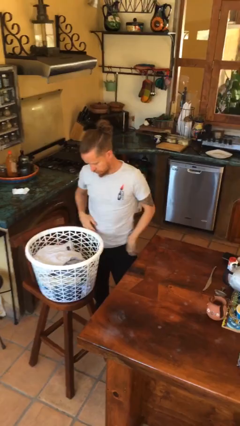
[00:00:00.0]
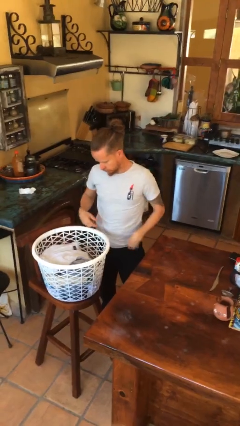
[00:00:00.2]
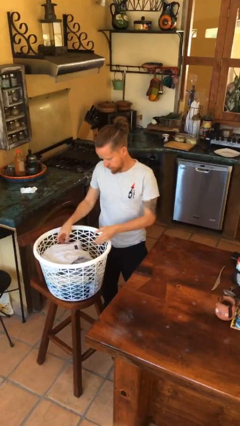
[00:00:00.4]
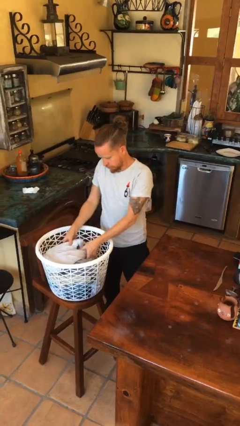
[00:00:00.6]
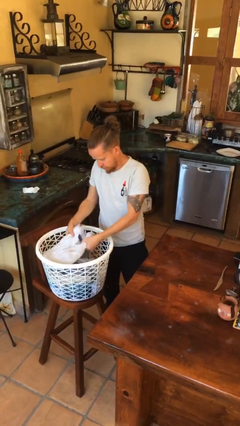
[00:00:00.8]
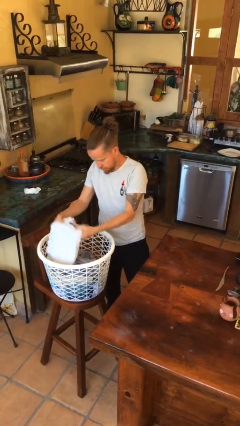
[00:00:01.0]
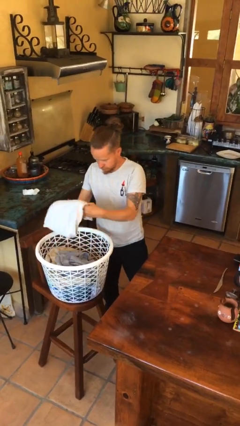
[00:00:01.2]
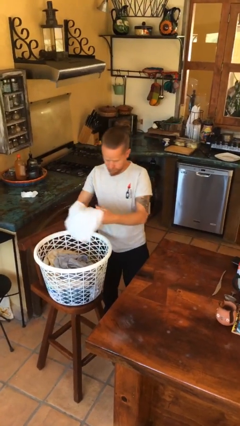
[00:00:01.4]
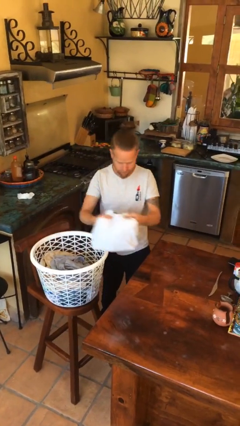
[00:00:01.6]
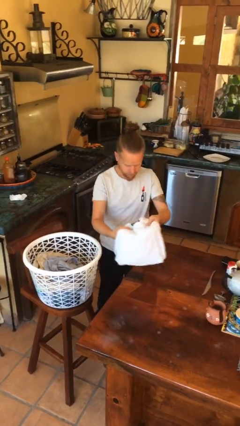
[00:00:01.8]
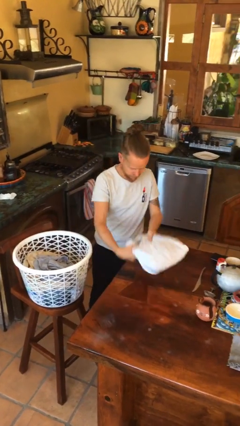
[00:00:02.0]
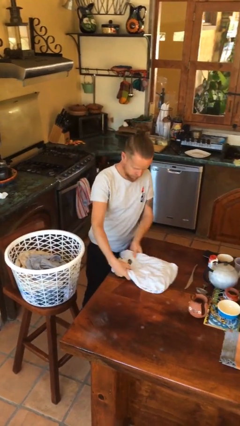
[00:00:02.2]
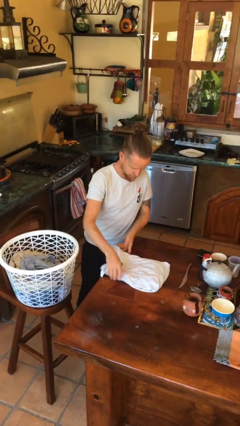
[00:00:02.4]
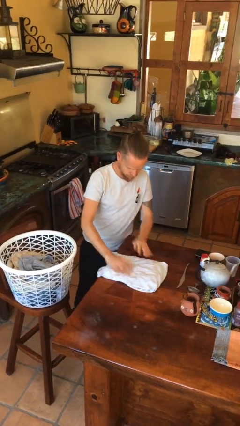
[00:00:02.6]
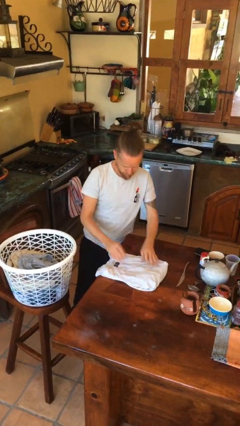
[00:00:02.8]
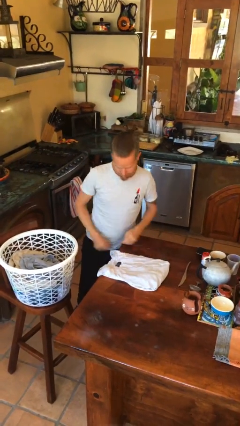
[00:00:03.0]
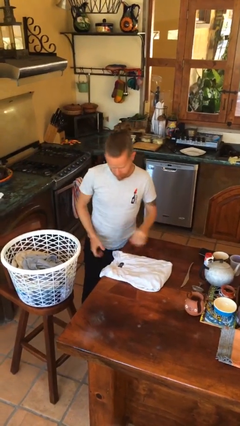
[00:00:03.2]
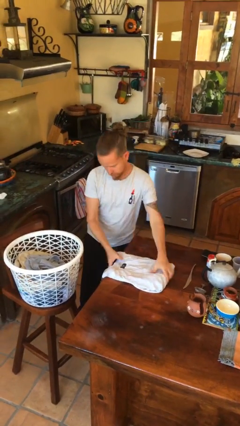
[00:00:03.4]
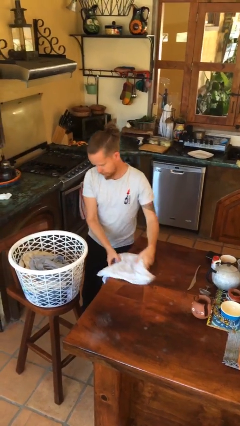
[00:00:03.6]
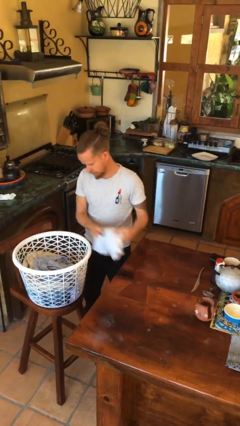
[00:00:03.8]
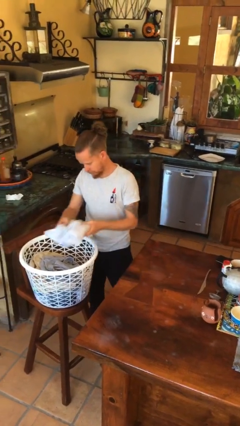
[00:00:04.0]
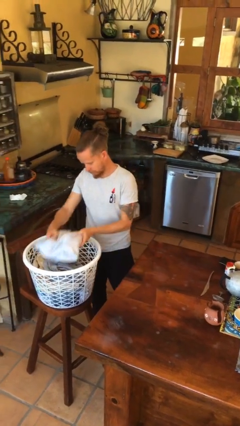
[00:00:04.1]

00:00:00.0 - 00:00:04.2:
person folds shirt

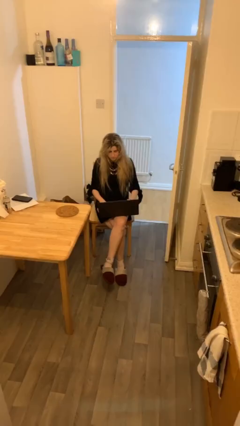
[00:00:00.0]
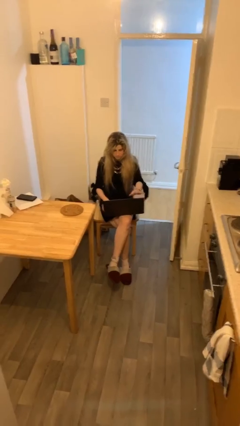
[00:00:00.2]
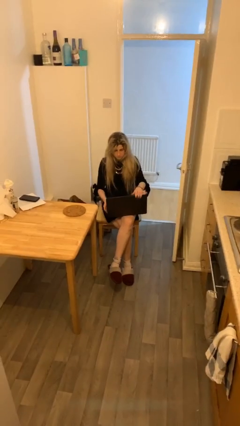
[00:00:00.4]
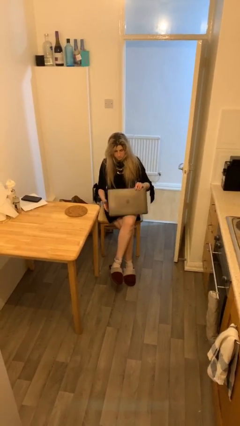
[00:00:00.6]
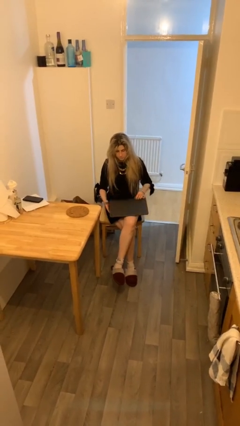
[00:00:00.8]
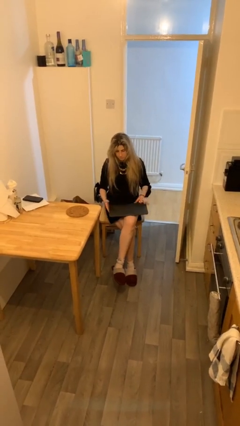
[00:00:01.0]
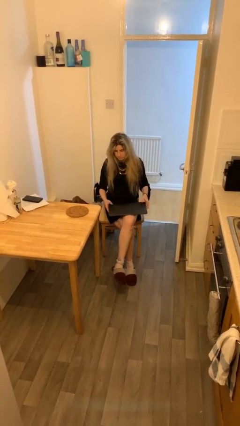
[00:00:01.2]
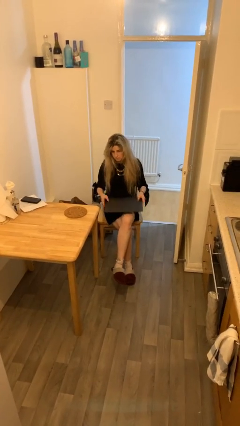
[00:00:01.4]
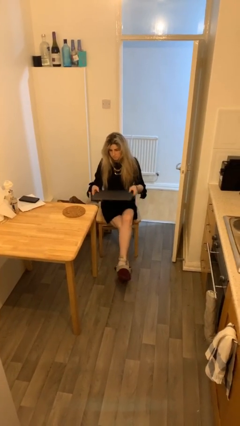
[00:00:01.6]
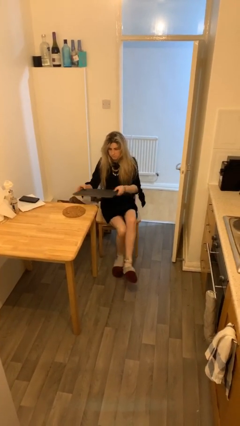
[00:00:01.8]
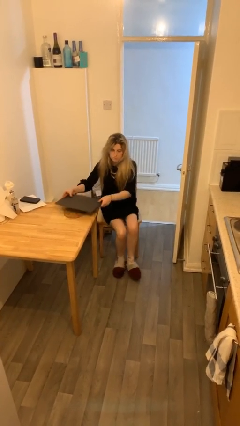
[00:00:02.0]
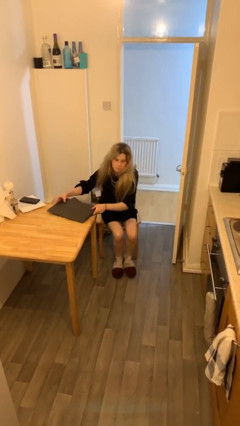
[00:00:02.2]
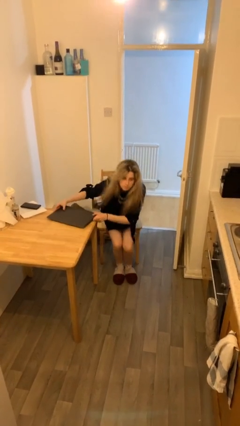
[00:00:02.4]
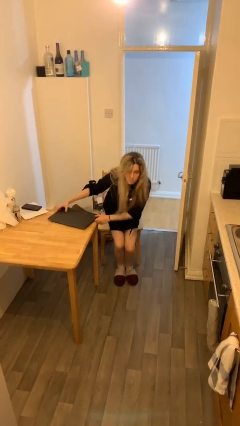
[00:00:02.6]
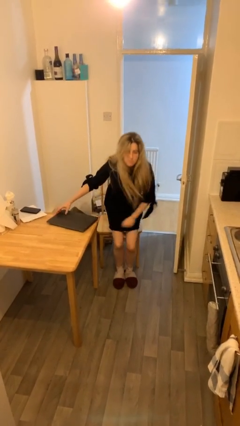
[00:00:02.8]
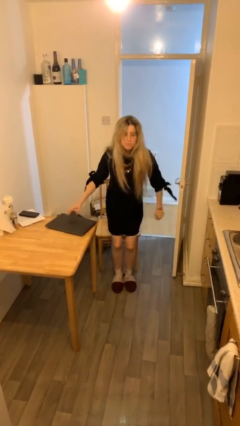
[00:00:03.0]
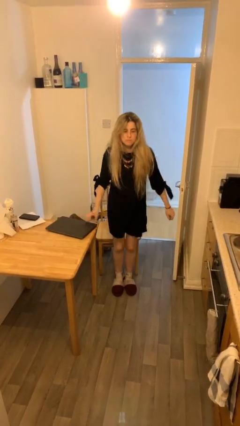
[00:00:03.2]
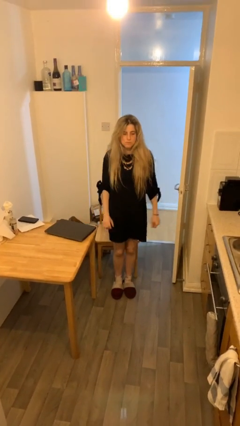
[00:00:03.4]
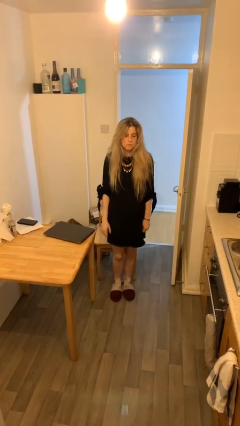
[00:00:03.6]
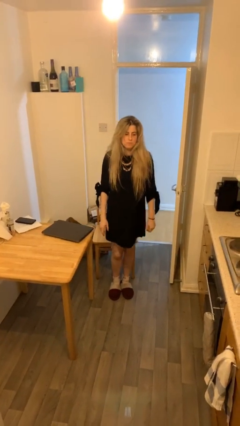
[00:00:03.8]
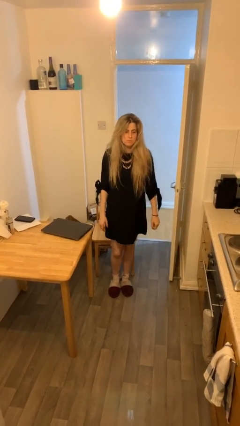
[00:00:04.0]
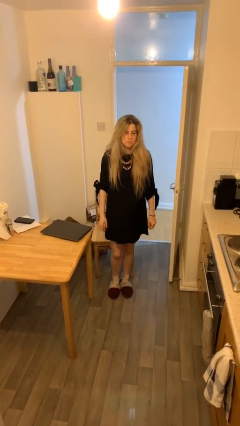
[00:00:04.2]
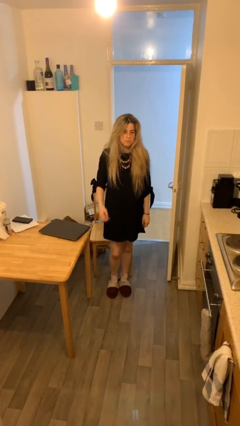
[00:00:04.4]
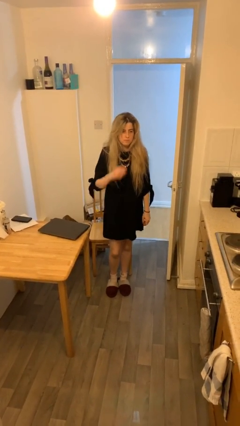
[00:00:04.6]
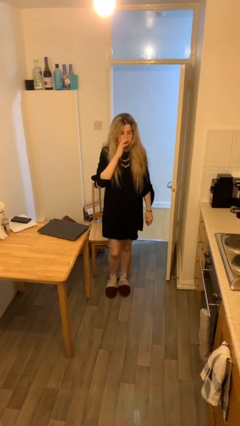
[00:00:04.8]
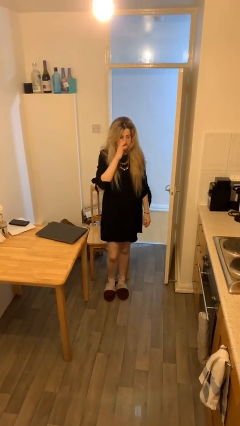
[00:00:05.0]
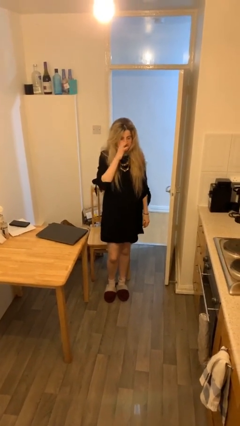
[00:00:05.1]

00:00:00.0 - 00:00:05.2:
person stands up

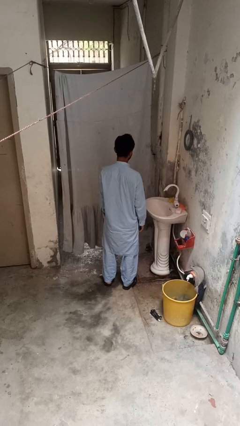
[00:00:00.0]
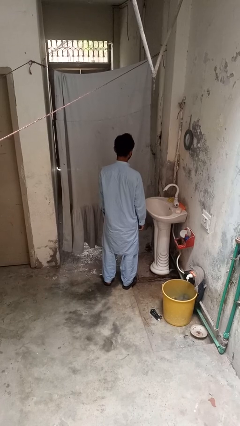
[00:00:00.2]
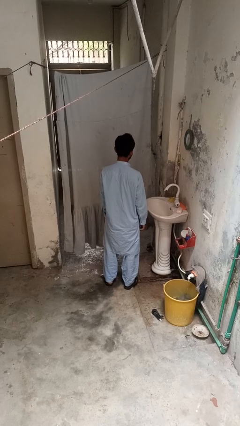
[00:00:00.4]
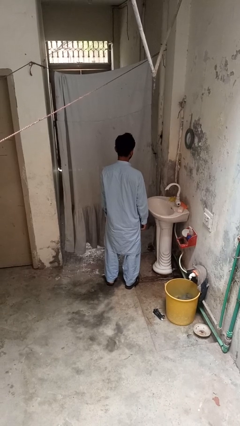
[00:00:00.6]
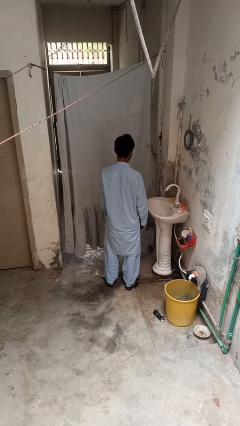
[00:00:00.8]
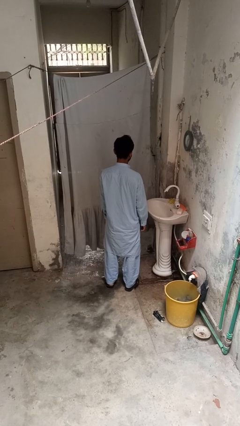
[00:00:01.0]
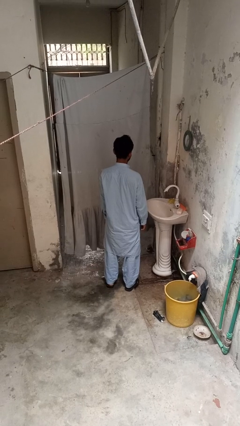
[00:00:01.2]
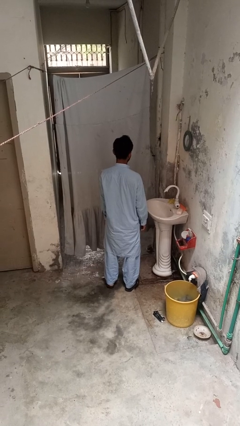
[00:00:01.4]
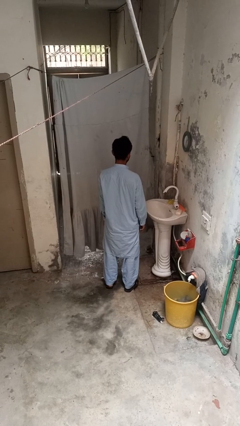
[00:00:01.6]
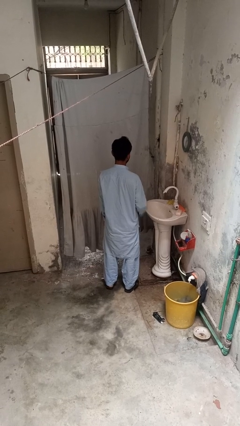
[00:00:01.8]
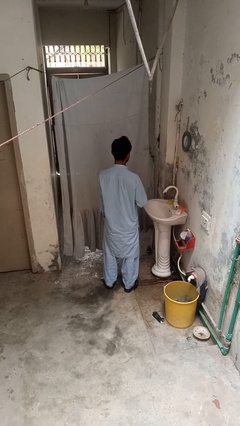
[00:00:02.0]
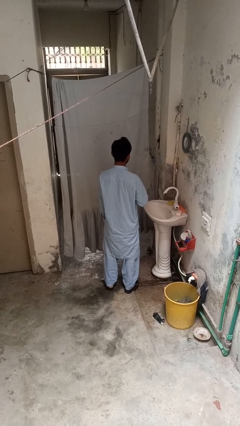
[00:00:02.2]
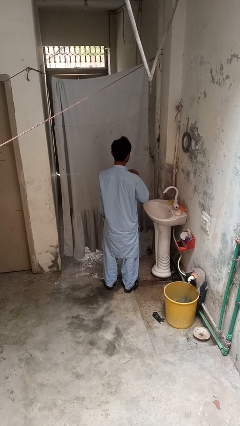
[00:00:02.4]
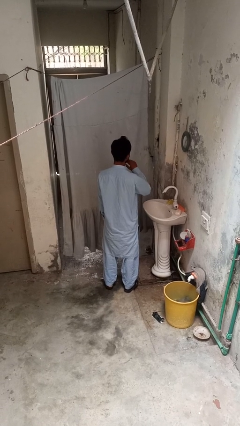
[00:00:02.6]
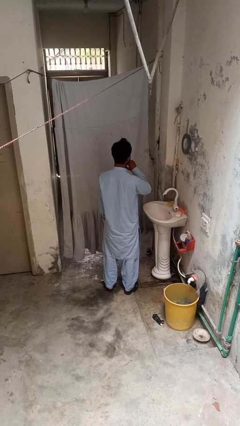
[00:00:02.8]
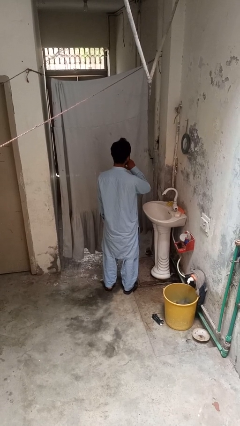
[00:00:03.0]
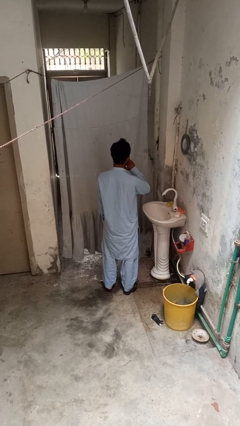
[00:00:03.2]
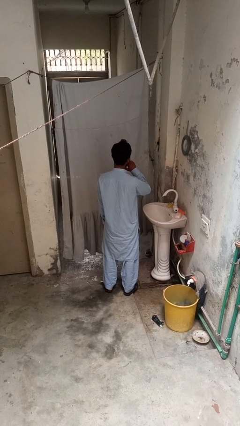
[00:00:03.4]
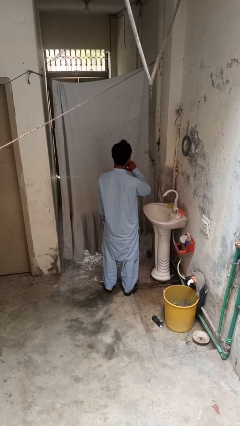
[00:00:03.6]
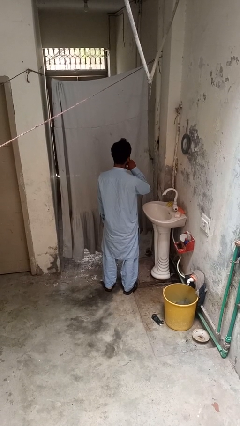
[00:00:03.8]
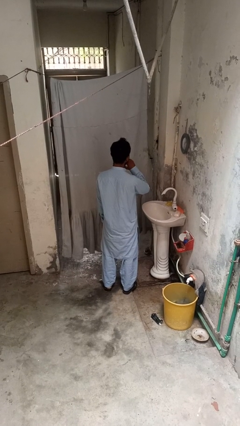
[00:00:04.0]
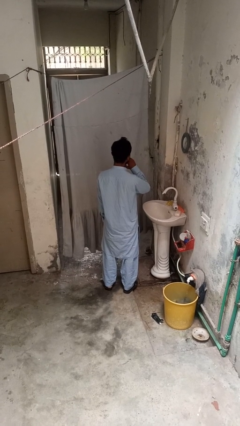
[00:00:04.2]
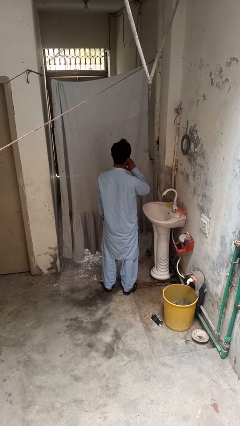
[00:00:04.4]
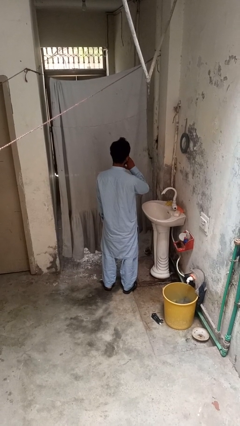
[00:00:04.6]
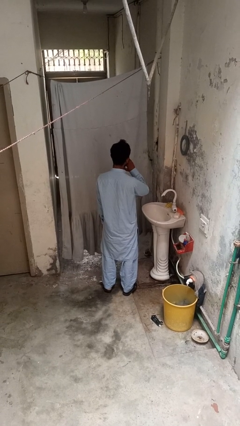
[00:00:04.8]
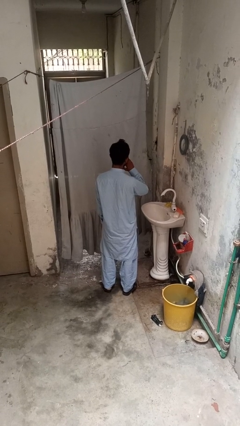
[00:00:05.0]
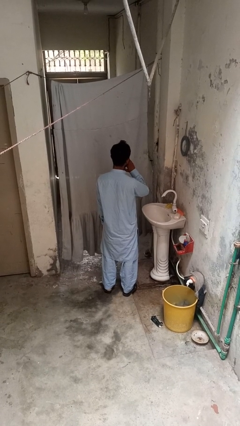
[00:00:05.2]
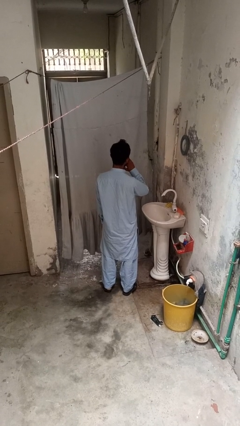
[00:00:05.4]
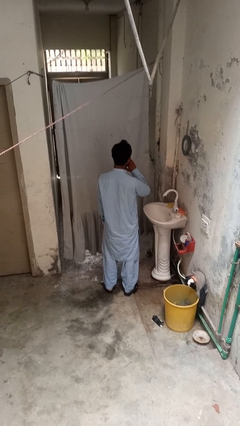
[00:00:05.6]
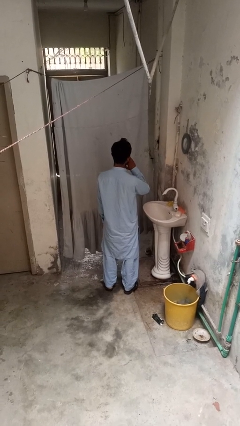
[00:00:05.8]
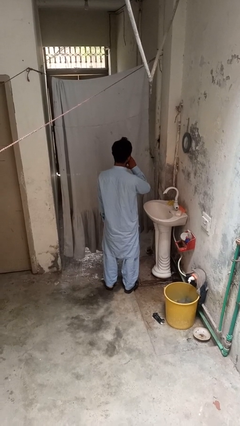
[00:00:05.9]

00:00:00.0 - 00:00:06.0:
person yawns

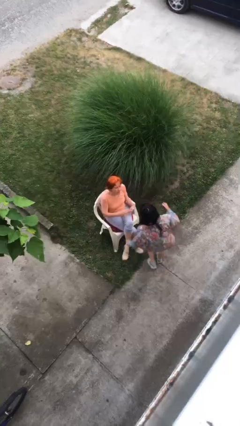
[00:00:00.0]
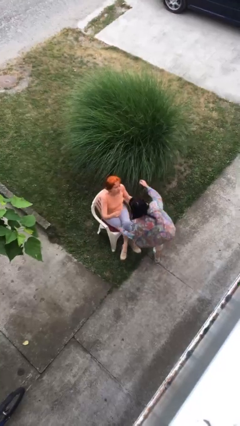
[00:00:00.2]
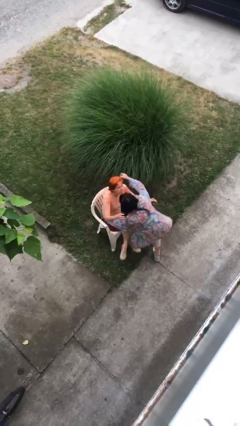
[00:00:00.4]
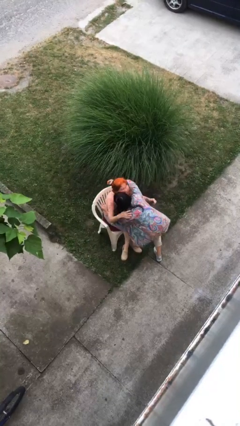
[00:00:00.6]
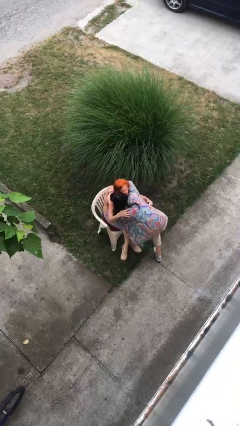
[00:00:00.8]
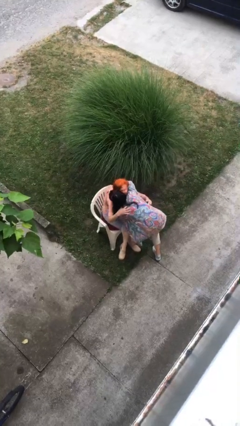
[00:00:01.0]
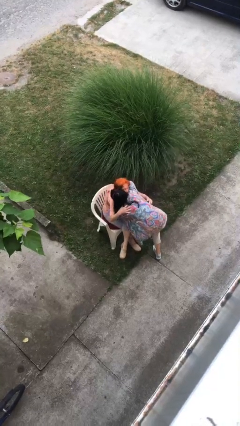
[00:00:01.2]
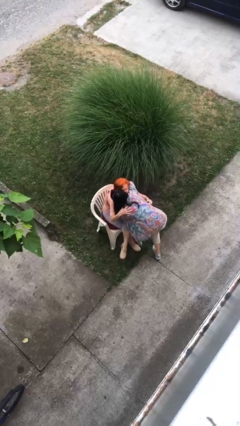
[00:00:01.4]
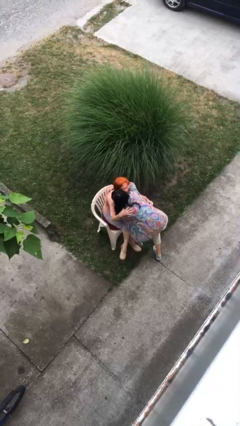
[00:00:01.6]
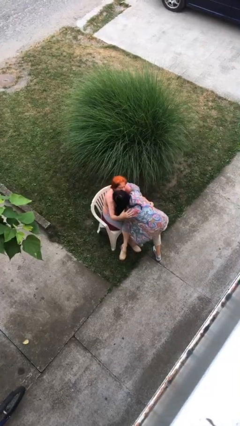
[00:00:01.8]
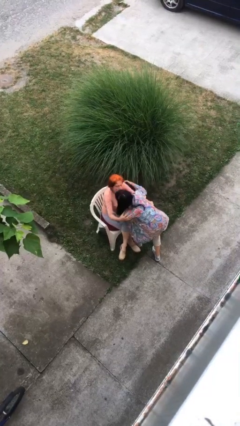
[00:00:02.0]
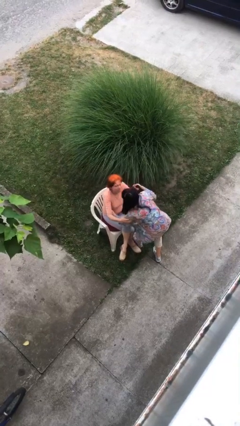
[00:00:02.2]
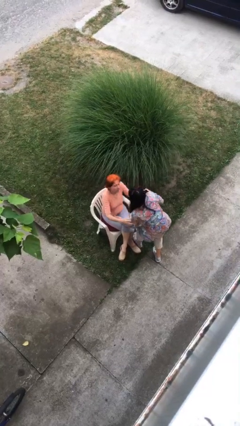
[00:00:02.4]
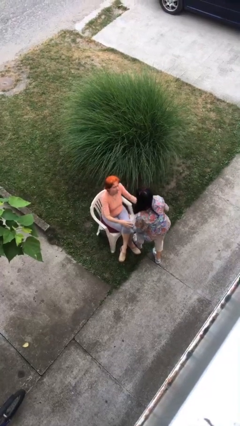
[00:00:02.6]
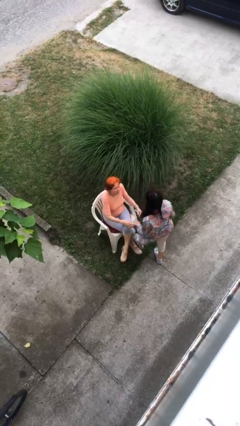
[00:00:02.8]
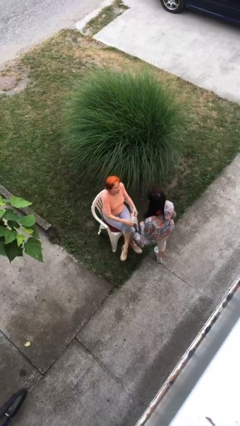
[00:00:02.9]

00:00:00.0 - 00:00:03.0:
person embraces person
